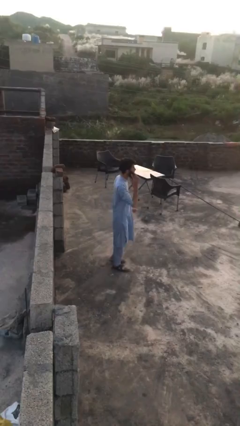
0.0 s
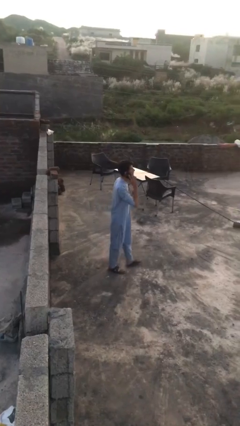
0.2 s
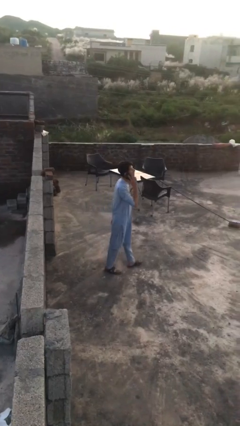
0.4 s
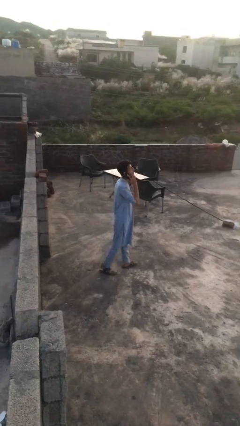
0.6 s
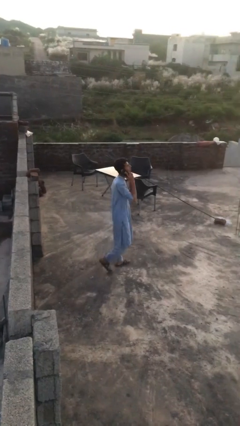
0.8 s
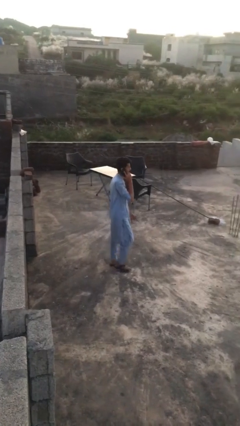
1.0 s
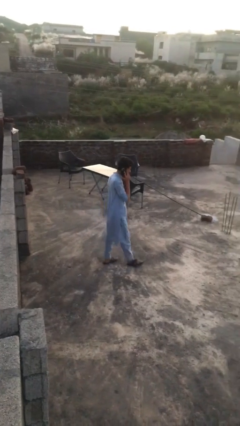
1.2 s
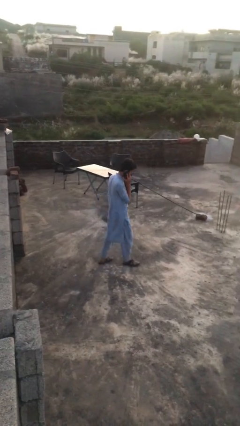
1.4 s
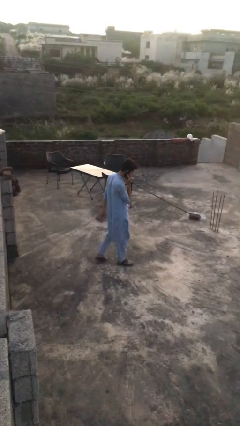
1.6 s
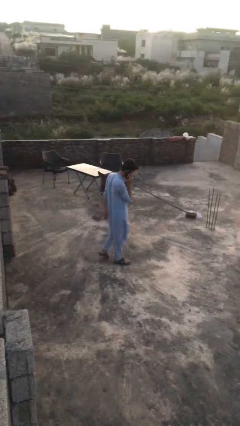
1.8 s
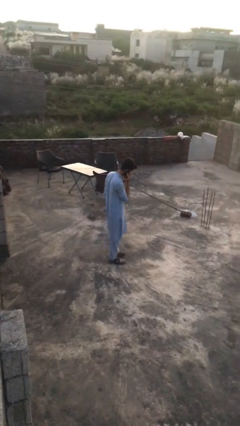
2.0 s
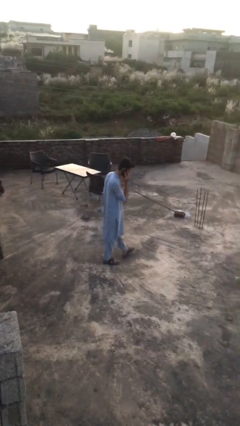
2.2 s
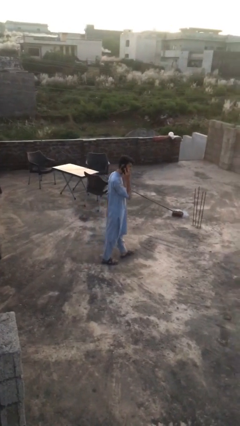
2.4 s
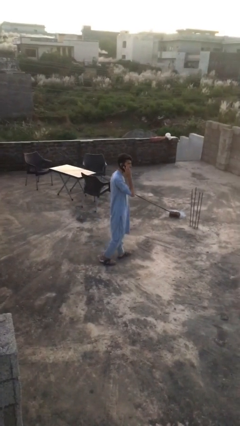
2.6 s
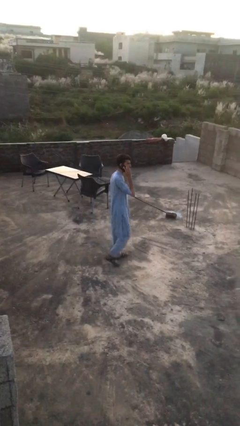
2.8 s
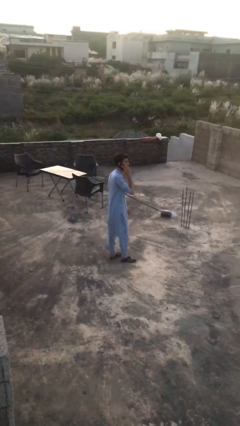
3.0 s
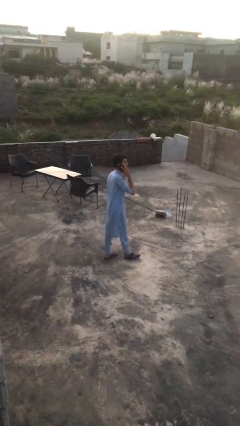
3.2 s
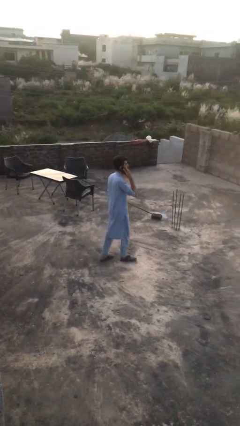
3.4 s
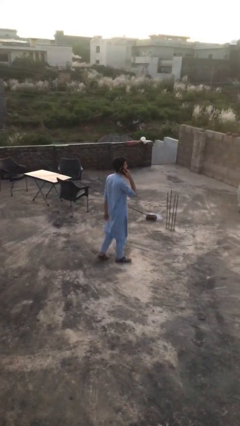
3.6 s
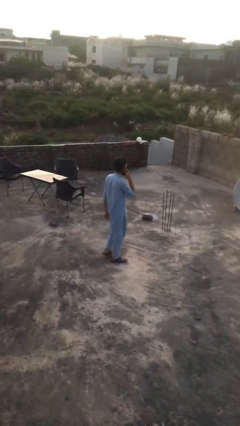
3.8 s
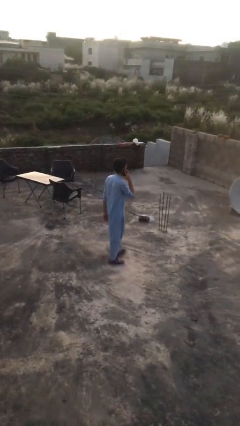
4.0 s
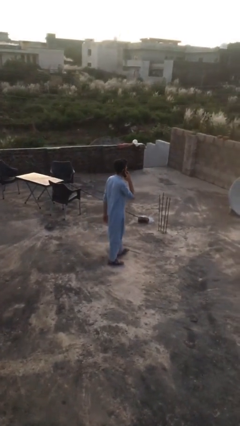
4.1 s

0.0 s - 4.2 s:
person talks on phone

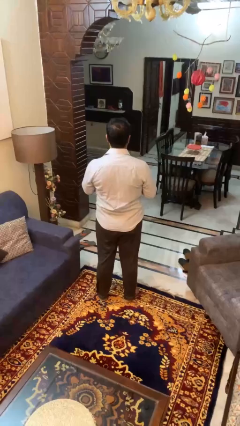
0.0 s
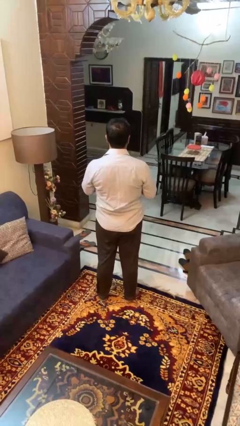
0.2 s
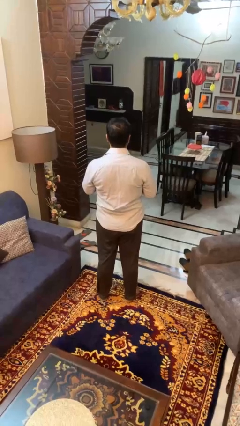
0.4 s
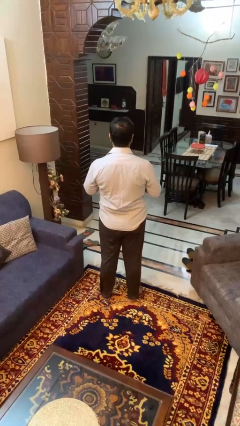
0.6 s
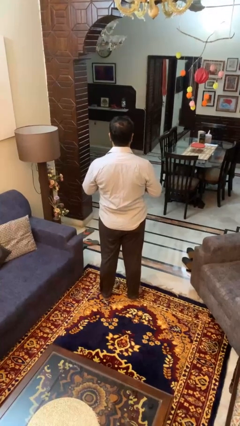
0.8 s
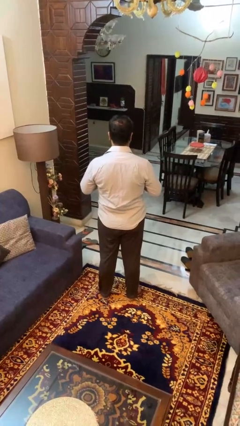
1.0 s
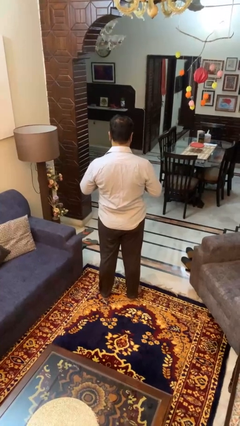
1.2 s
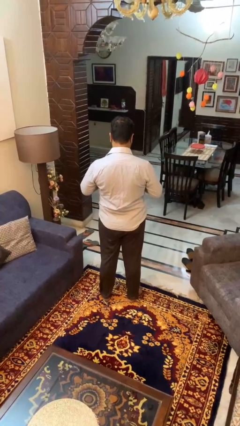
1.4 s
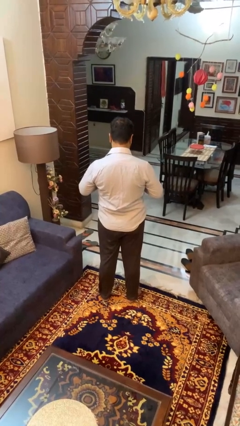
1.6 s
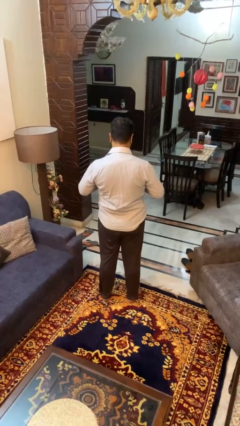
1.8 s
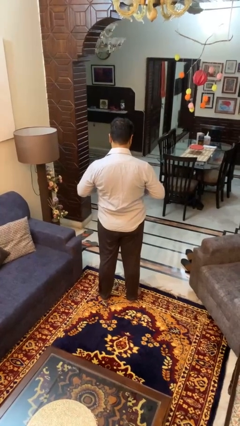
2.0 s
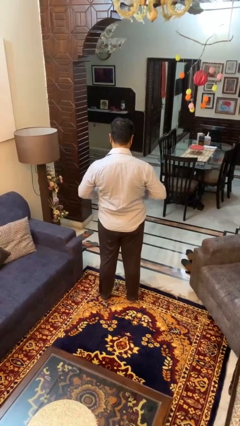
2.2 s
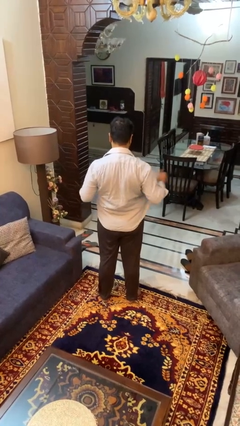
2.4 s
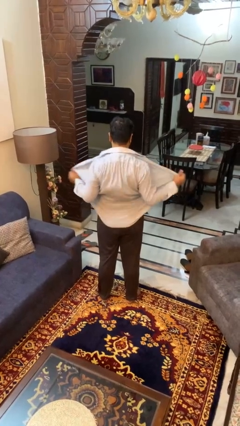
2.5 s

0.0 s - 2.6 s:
person unbuttons shirt

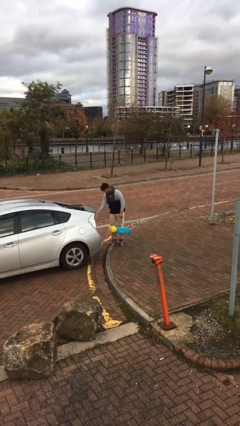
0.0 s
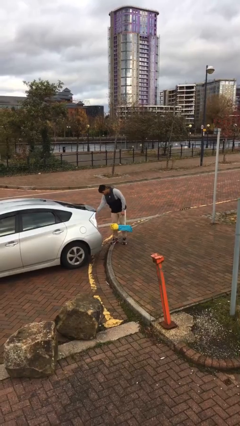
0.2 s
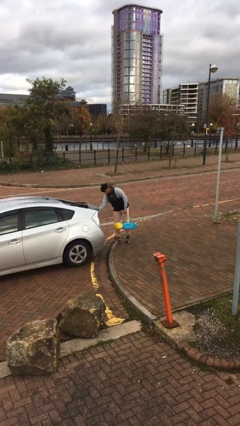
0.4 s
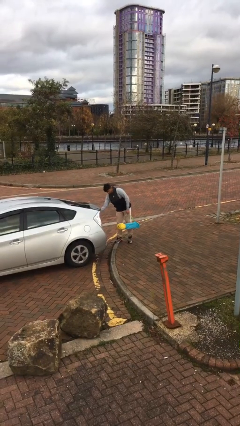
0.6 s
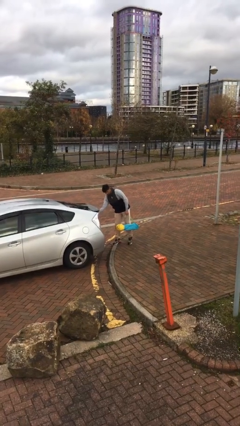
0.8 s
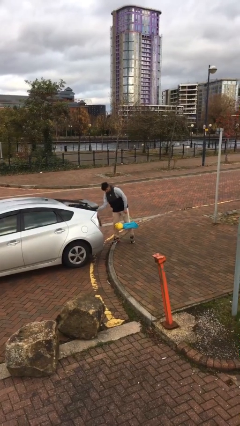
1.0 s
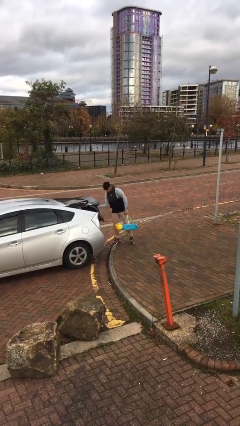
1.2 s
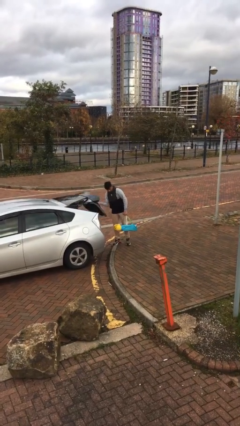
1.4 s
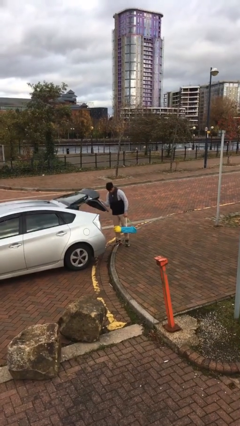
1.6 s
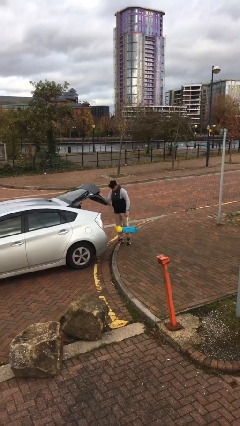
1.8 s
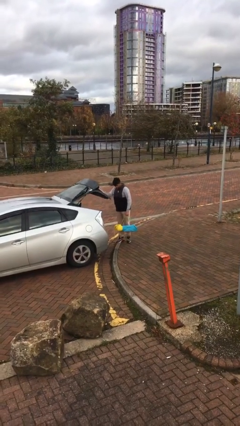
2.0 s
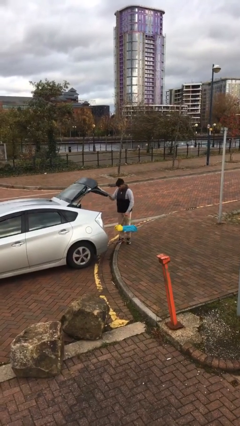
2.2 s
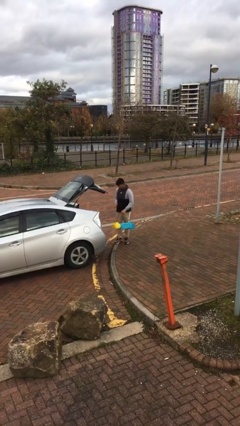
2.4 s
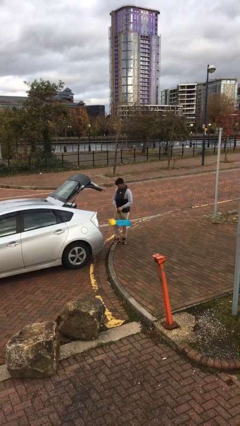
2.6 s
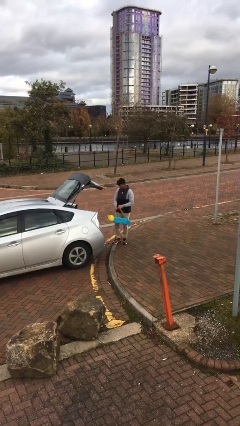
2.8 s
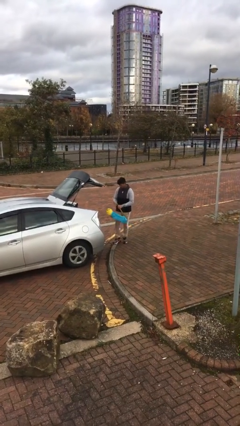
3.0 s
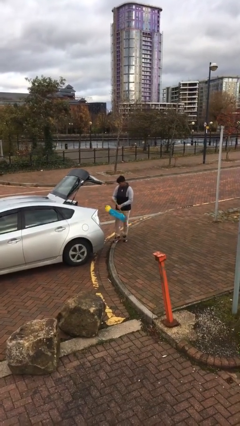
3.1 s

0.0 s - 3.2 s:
person opens car trunk

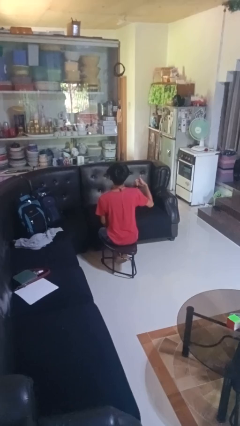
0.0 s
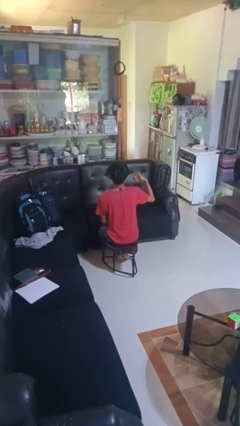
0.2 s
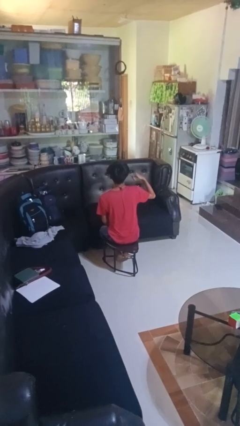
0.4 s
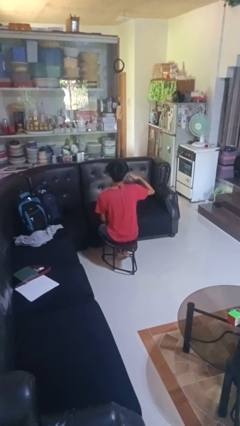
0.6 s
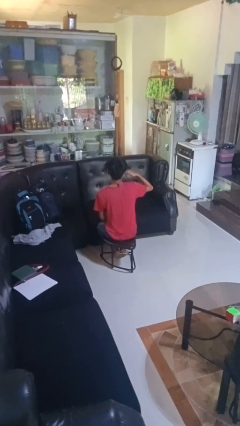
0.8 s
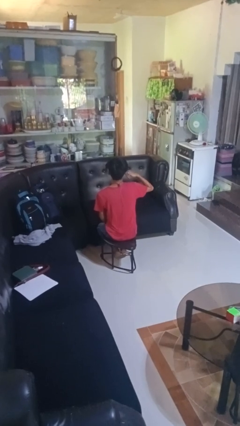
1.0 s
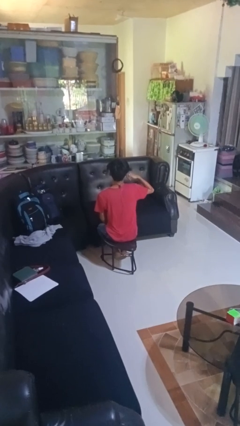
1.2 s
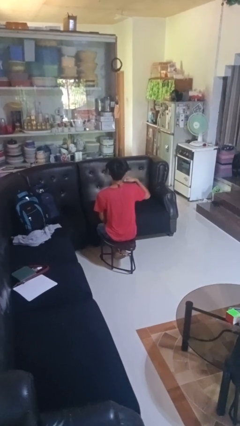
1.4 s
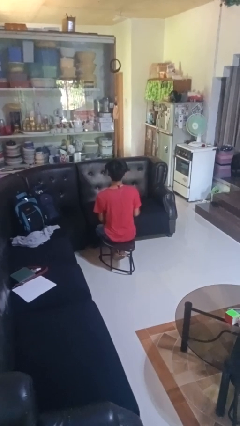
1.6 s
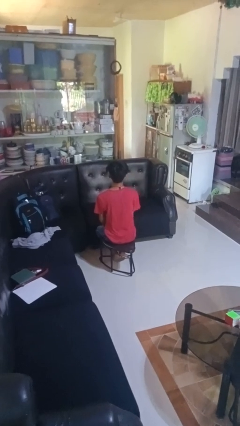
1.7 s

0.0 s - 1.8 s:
person gestures call me

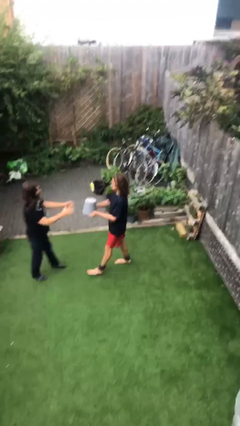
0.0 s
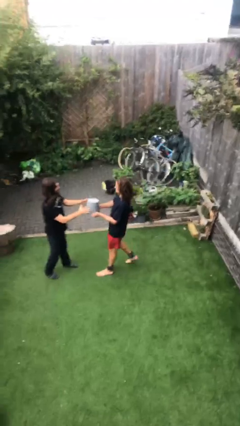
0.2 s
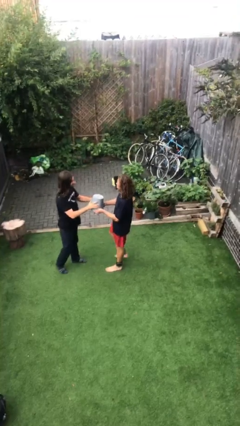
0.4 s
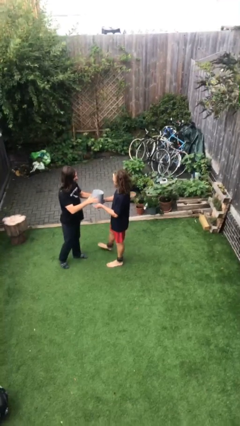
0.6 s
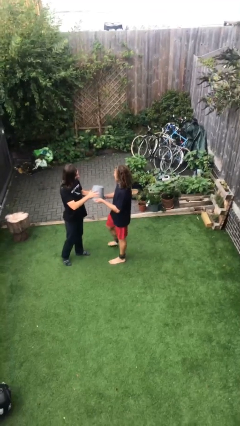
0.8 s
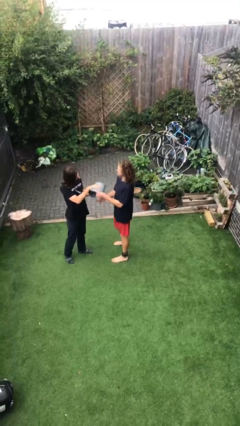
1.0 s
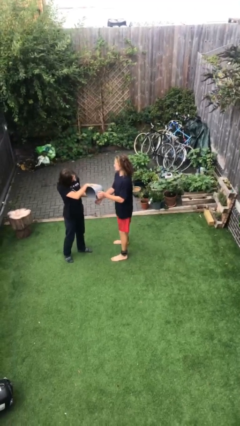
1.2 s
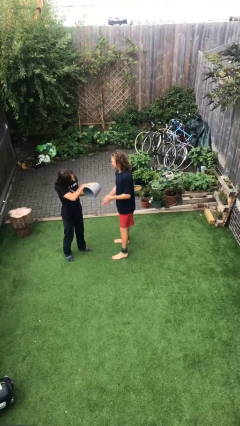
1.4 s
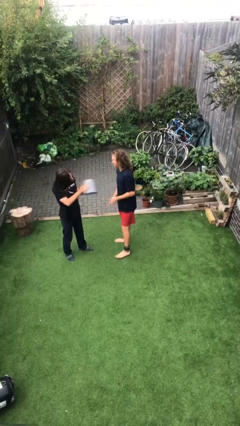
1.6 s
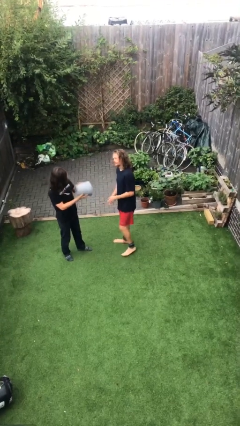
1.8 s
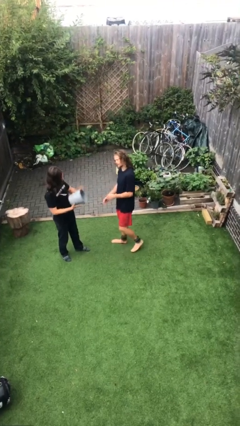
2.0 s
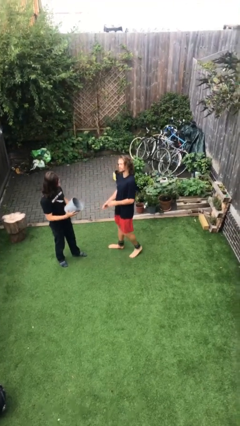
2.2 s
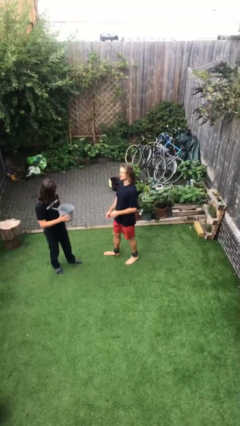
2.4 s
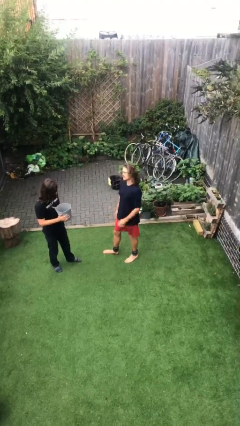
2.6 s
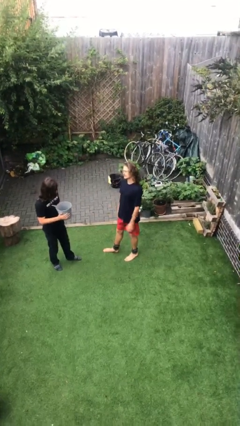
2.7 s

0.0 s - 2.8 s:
person transfers object to person

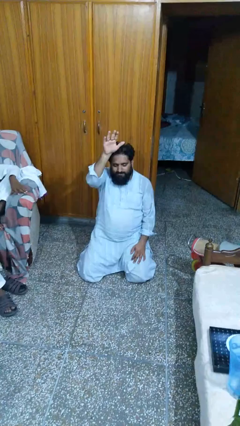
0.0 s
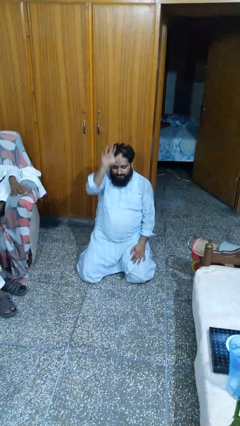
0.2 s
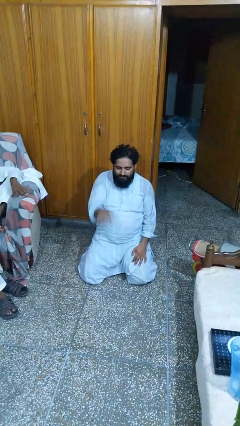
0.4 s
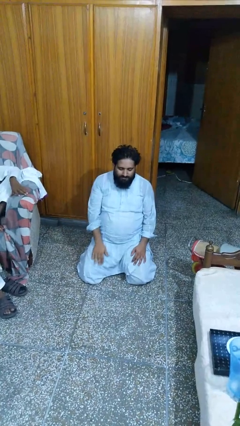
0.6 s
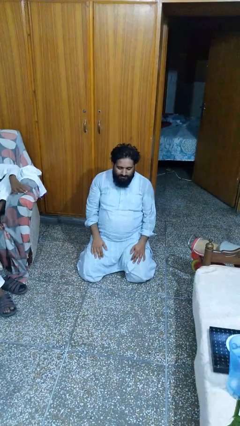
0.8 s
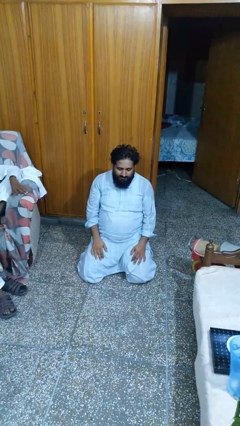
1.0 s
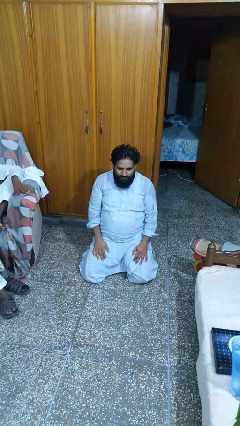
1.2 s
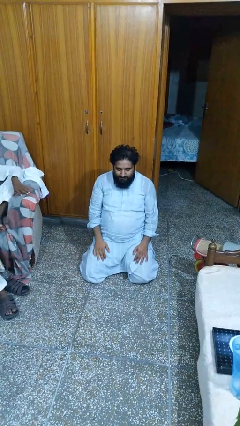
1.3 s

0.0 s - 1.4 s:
person gestures lower hand

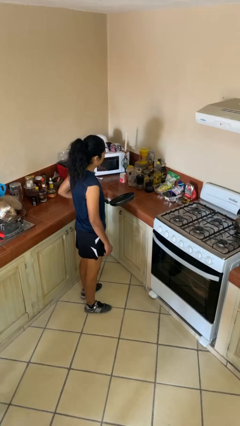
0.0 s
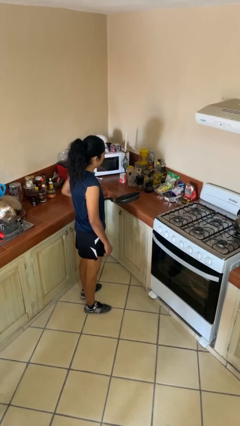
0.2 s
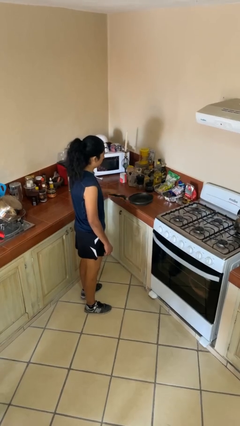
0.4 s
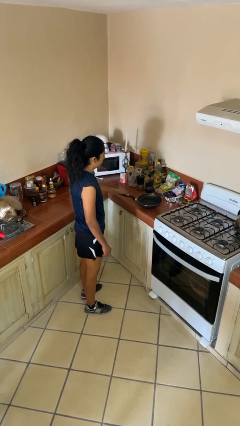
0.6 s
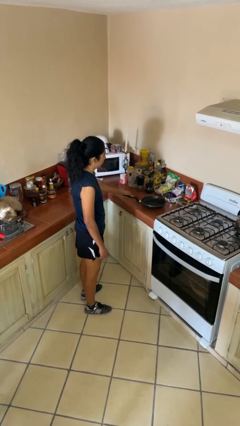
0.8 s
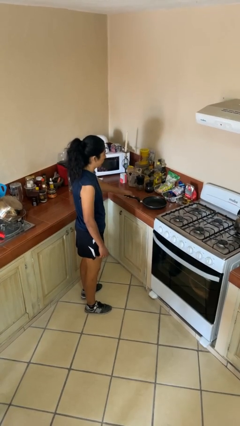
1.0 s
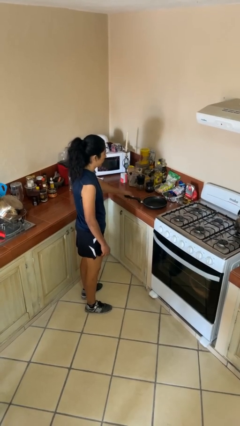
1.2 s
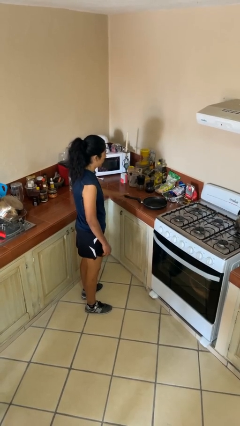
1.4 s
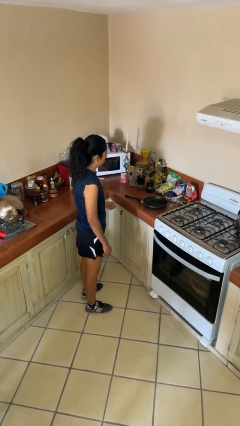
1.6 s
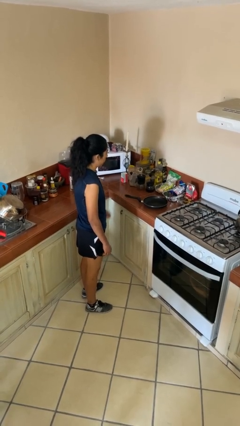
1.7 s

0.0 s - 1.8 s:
person puts down object on countertop
